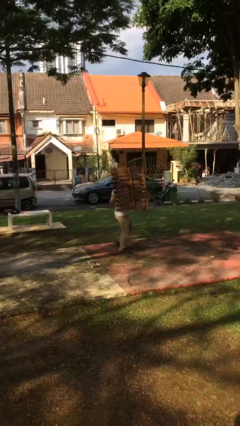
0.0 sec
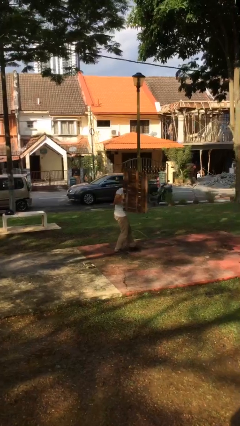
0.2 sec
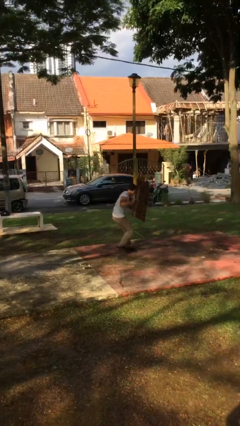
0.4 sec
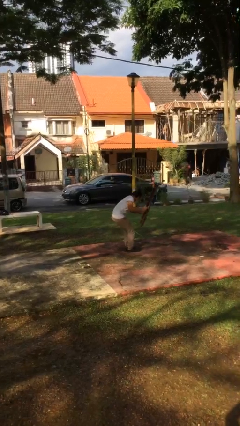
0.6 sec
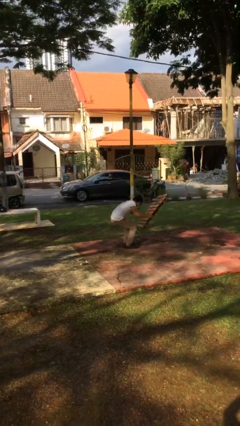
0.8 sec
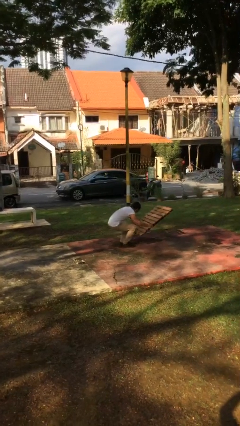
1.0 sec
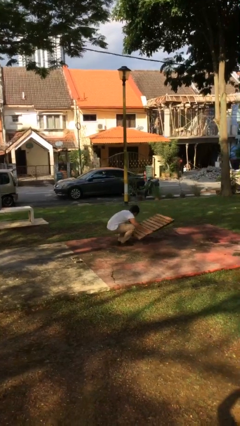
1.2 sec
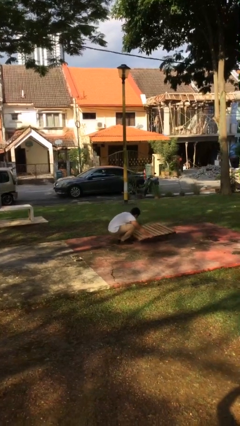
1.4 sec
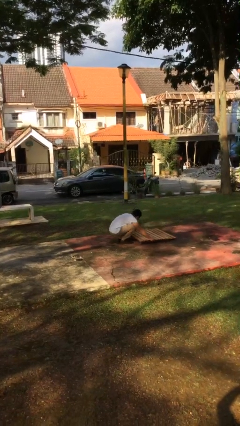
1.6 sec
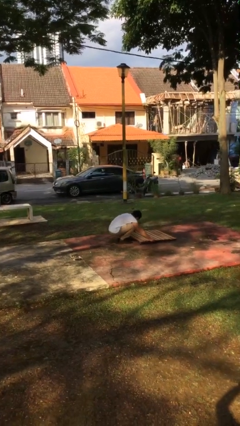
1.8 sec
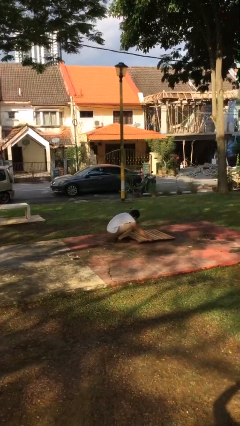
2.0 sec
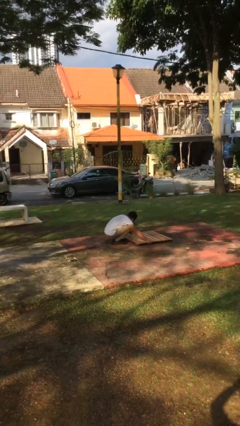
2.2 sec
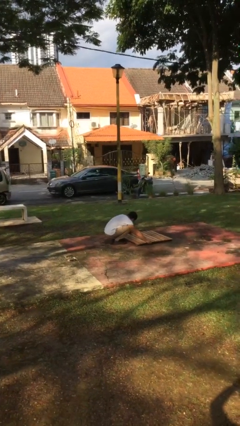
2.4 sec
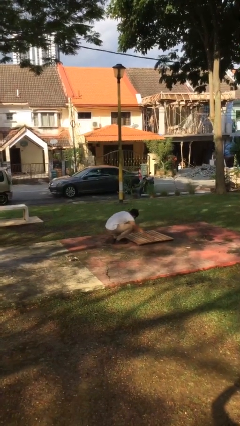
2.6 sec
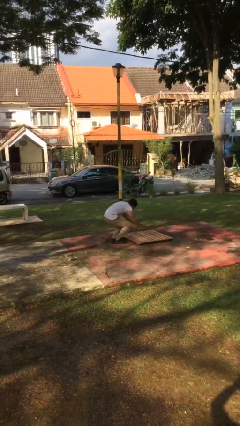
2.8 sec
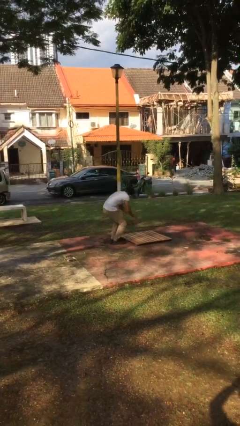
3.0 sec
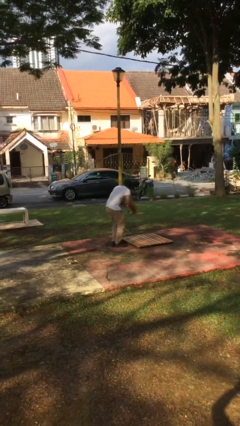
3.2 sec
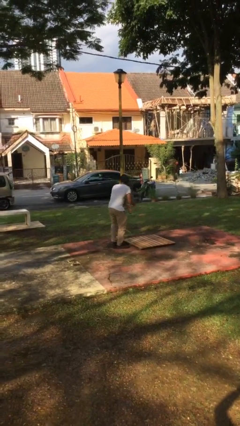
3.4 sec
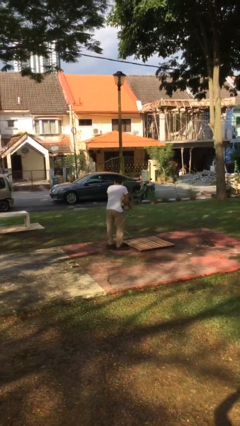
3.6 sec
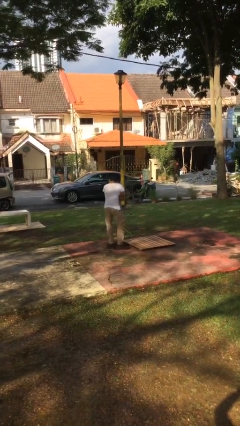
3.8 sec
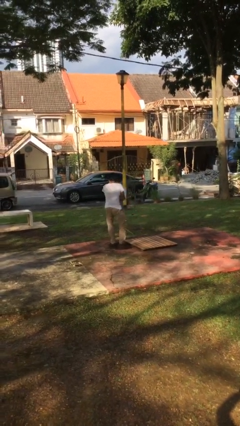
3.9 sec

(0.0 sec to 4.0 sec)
person puts down object on floor

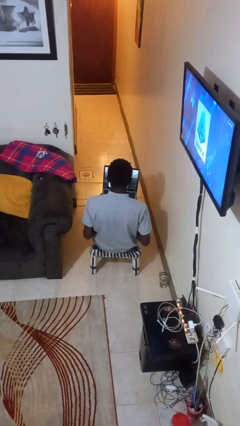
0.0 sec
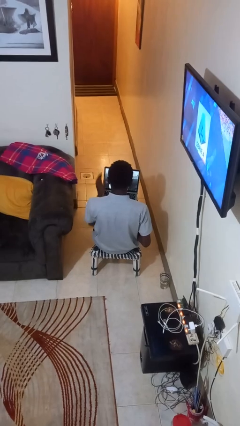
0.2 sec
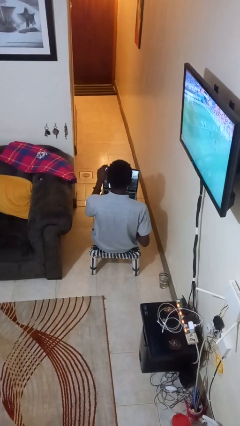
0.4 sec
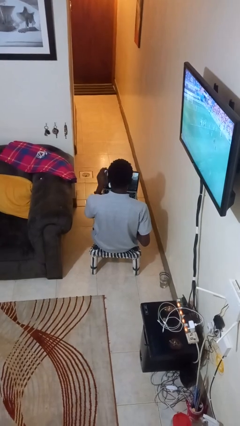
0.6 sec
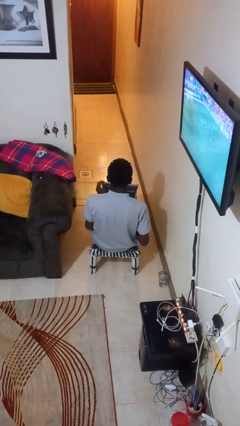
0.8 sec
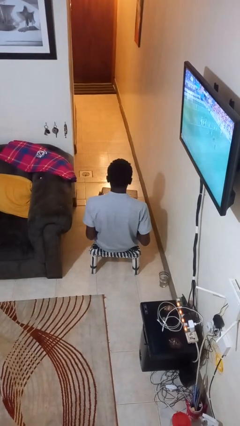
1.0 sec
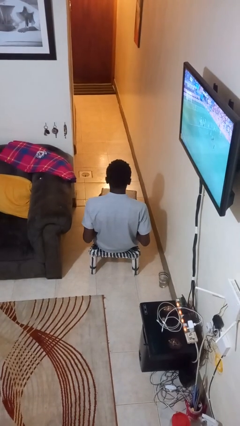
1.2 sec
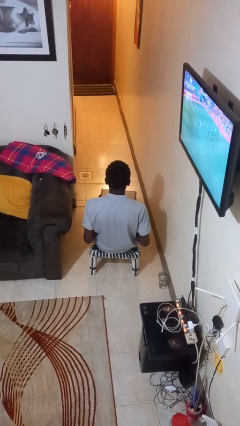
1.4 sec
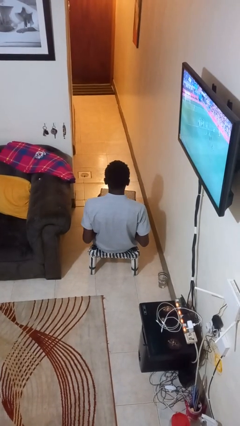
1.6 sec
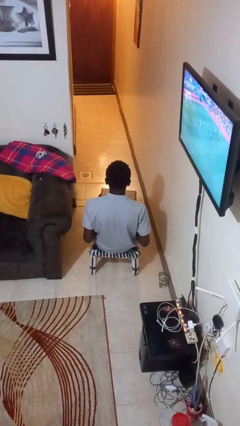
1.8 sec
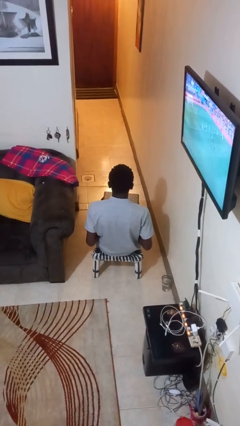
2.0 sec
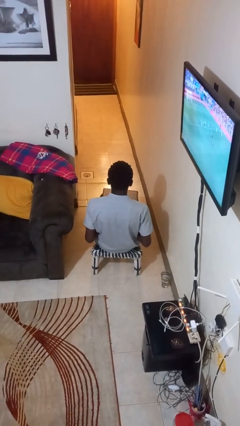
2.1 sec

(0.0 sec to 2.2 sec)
person closes laptop

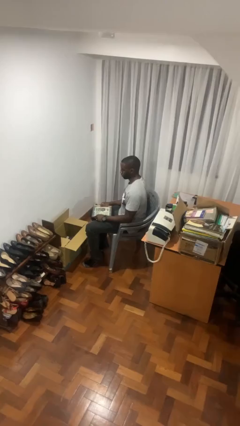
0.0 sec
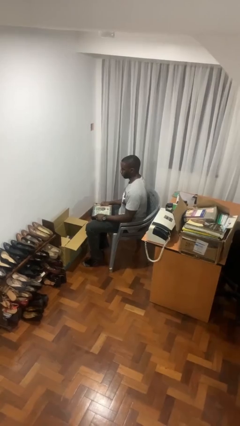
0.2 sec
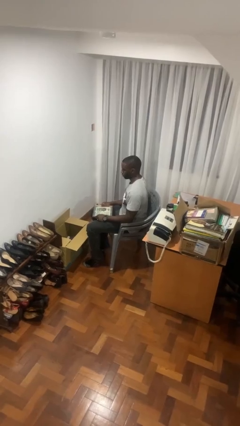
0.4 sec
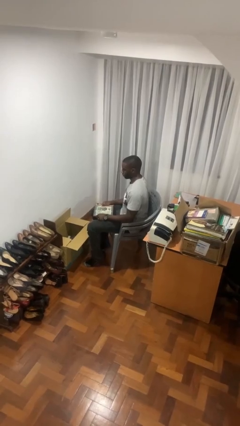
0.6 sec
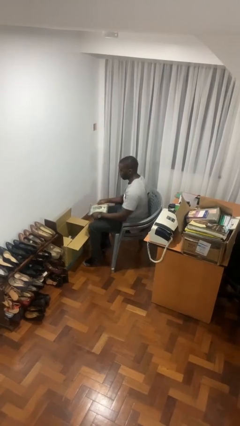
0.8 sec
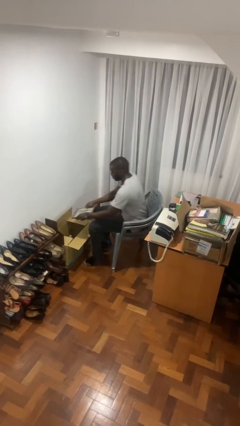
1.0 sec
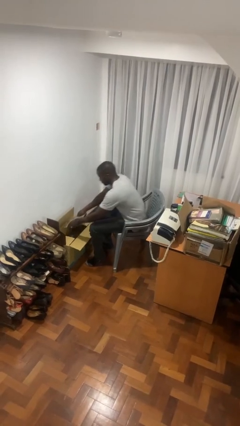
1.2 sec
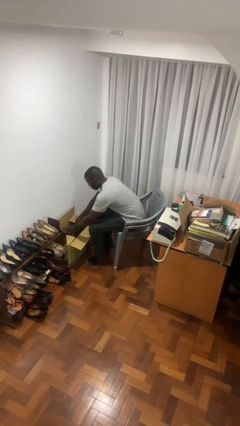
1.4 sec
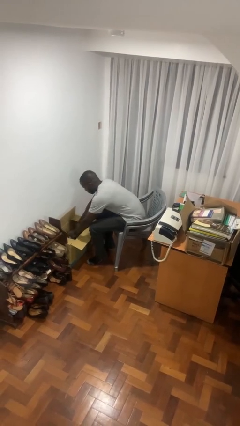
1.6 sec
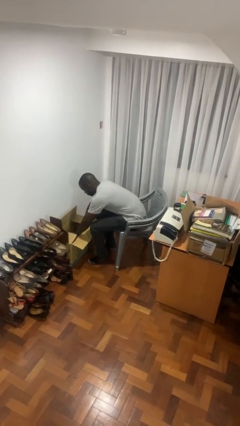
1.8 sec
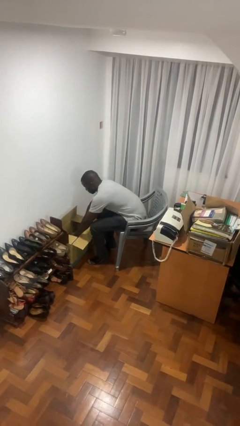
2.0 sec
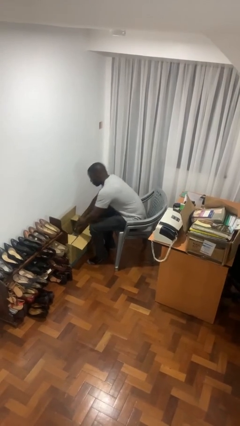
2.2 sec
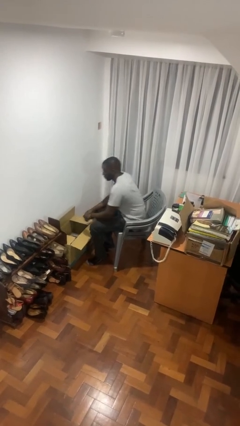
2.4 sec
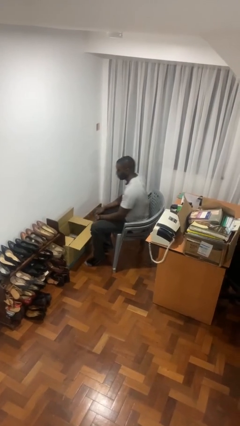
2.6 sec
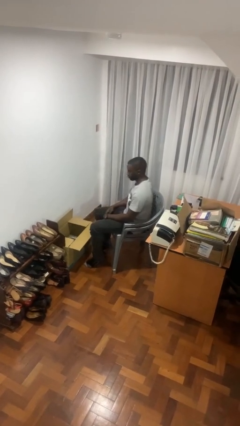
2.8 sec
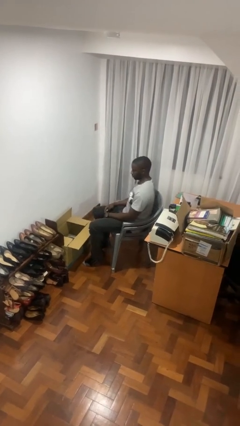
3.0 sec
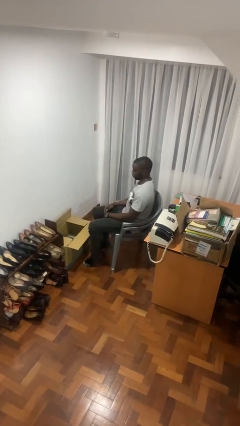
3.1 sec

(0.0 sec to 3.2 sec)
person puts object into box

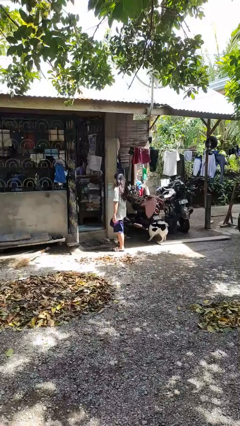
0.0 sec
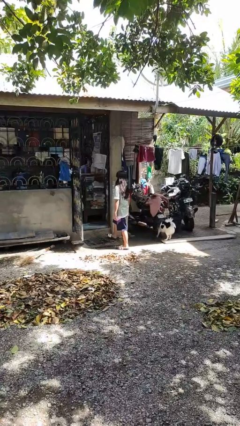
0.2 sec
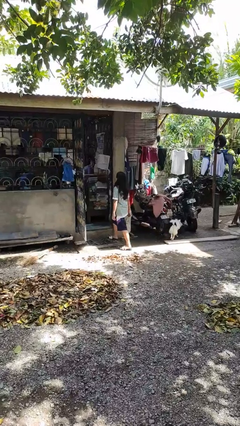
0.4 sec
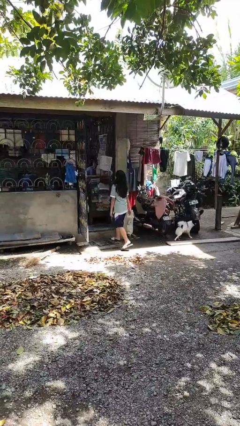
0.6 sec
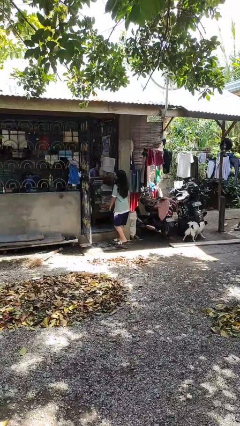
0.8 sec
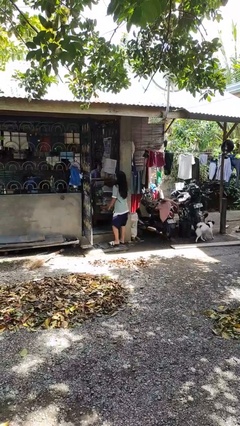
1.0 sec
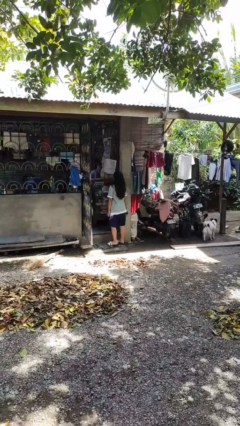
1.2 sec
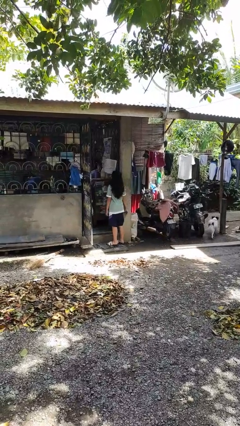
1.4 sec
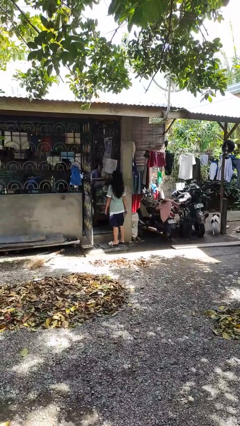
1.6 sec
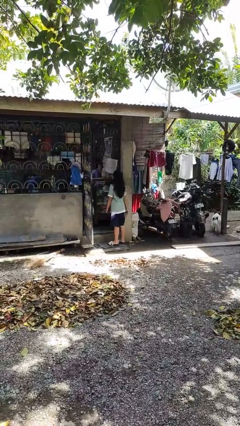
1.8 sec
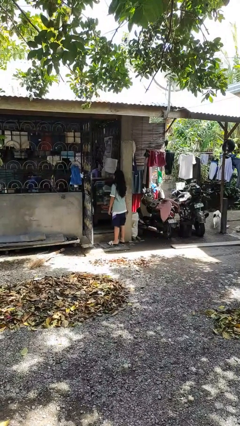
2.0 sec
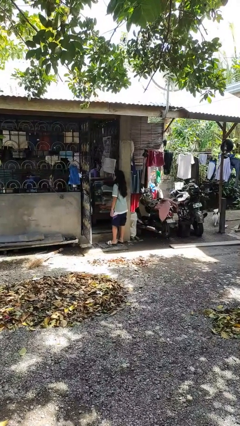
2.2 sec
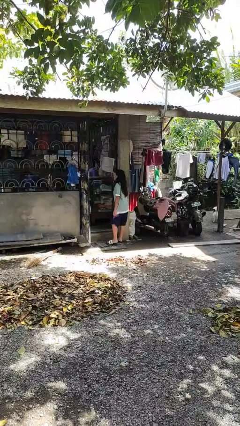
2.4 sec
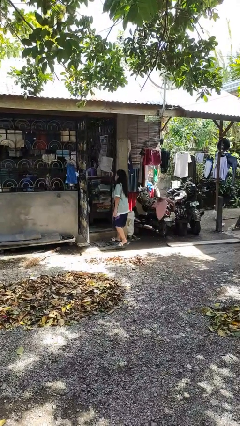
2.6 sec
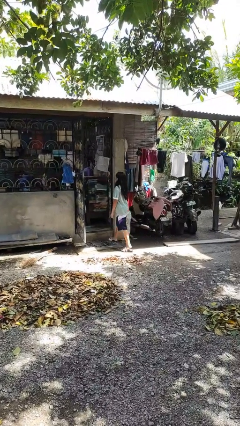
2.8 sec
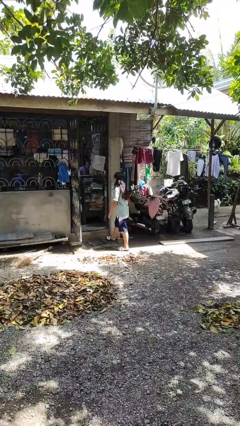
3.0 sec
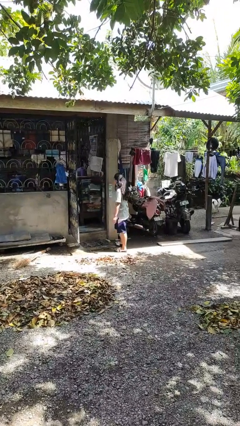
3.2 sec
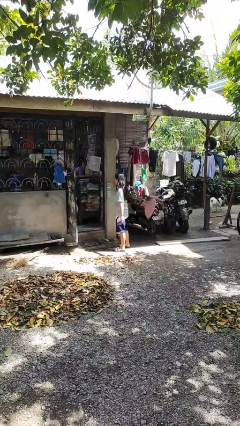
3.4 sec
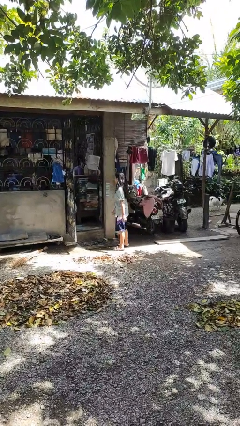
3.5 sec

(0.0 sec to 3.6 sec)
person bumps into wall

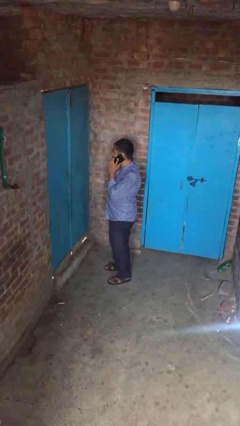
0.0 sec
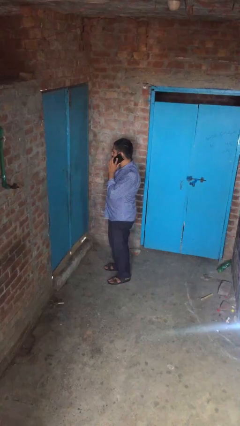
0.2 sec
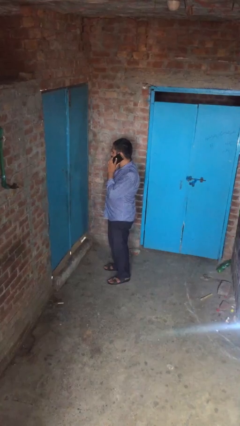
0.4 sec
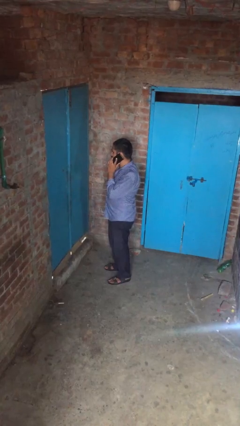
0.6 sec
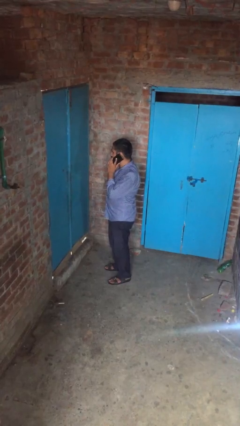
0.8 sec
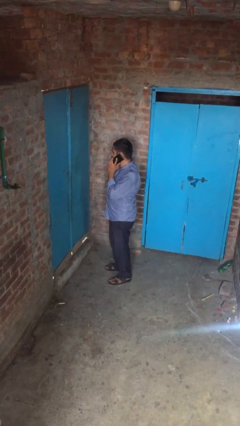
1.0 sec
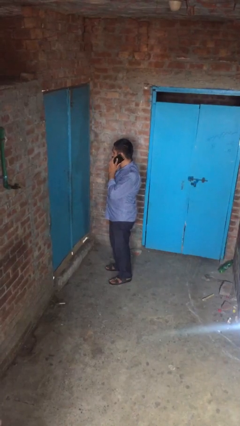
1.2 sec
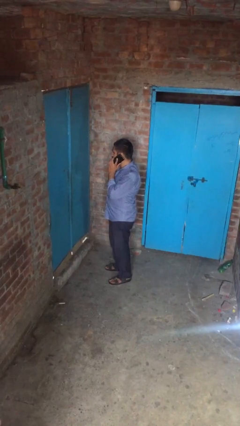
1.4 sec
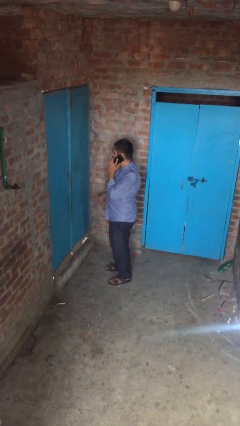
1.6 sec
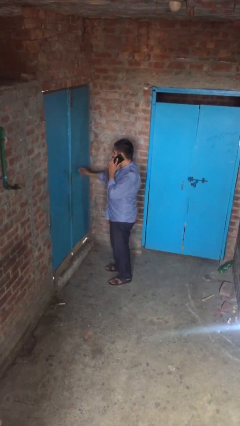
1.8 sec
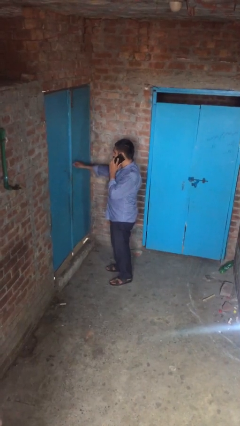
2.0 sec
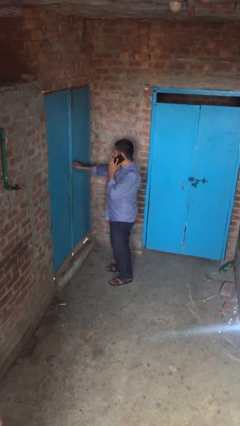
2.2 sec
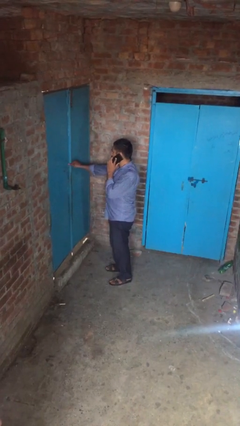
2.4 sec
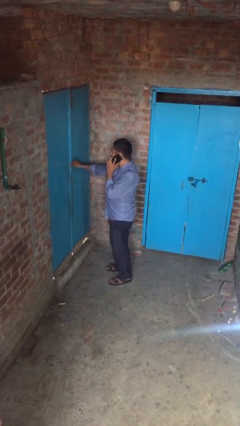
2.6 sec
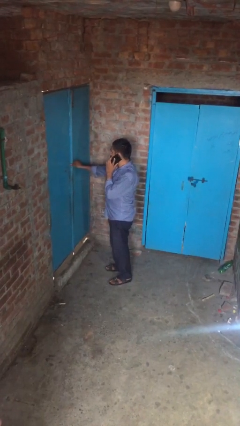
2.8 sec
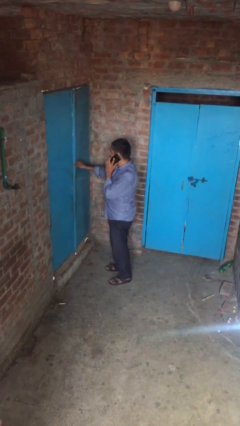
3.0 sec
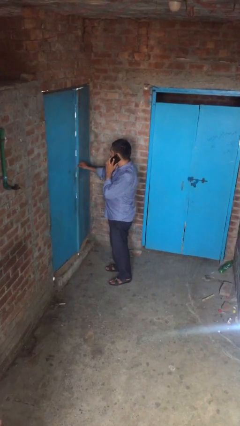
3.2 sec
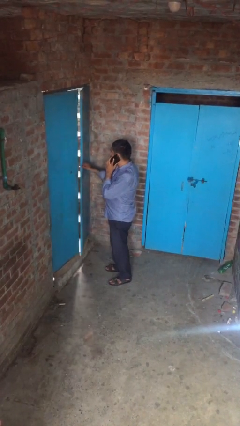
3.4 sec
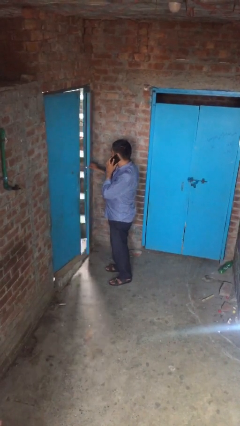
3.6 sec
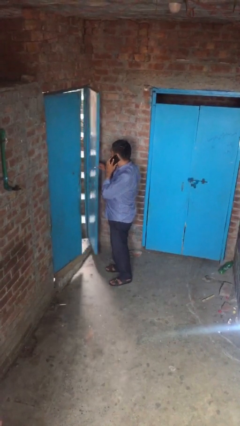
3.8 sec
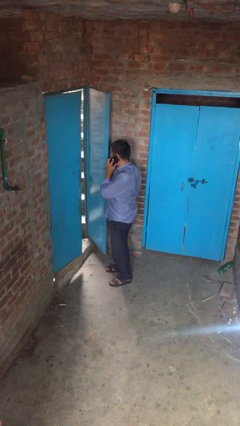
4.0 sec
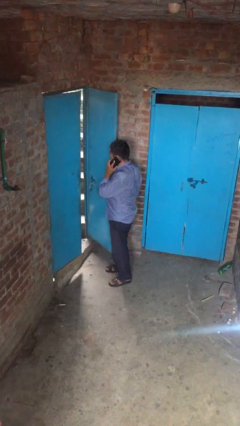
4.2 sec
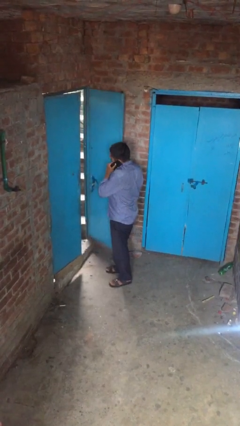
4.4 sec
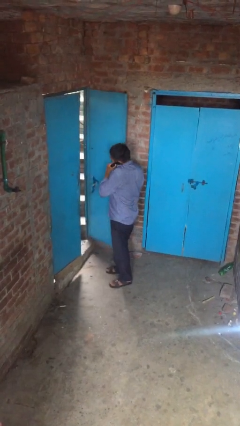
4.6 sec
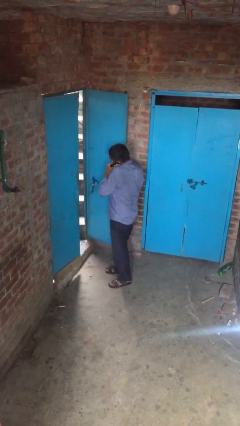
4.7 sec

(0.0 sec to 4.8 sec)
person opens facility door

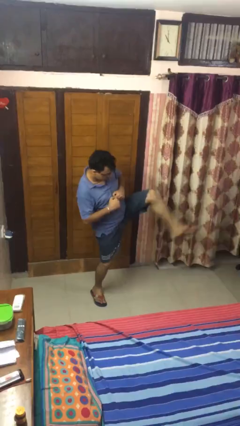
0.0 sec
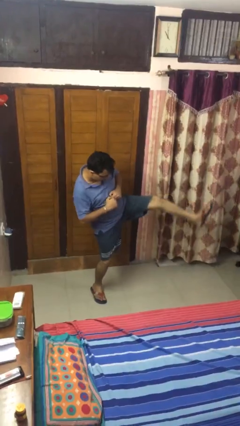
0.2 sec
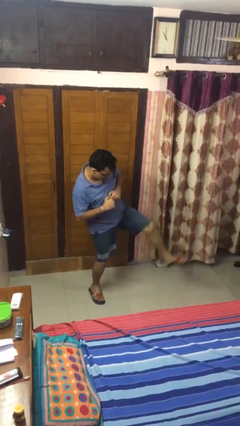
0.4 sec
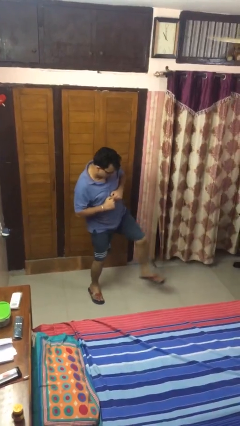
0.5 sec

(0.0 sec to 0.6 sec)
person karate kicks
